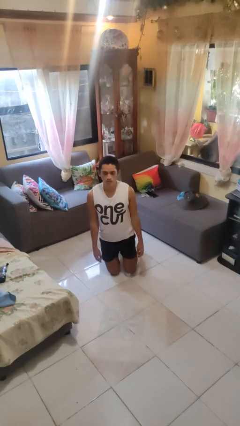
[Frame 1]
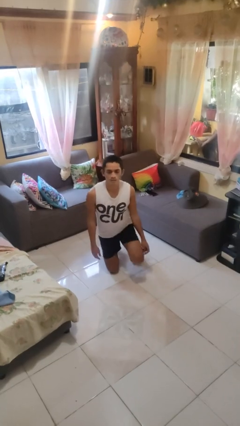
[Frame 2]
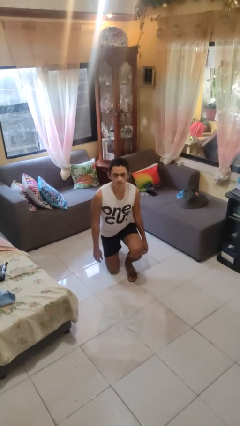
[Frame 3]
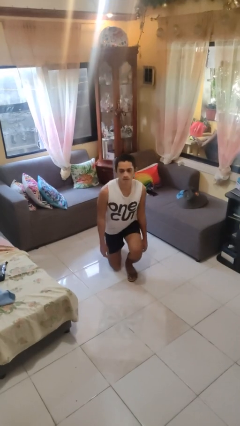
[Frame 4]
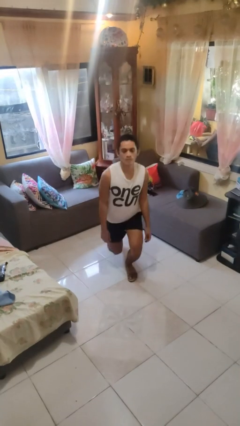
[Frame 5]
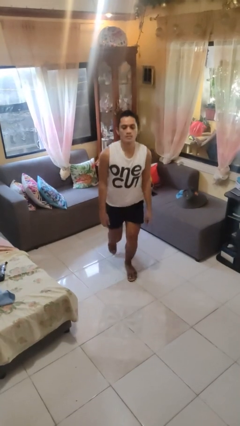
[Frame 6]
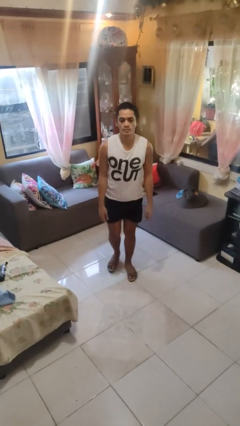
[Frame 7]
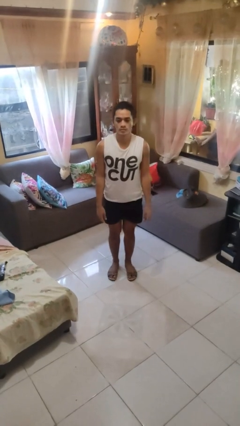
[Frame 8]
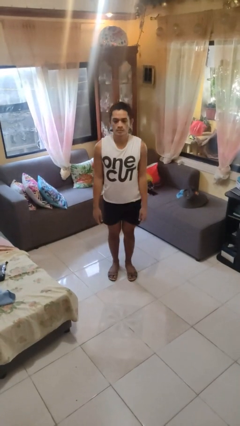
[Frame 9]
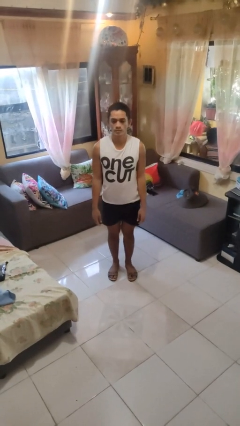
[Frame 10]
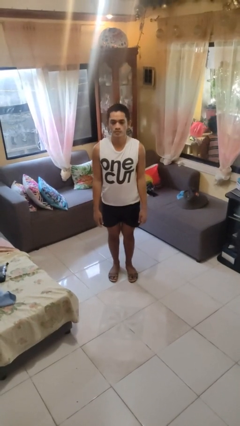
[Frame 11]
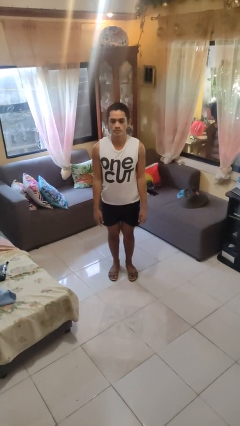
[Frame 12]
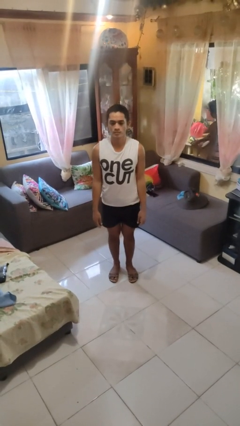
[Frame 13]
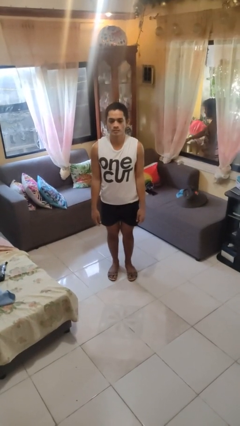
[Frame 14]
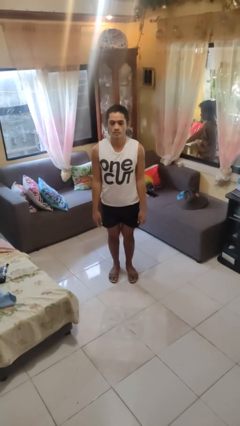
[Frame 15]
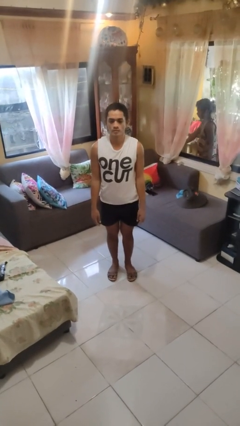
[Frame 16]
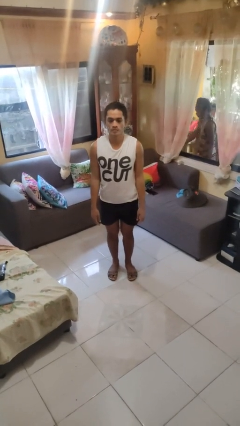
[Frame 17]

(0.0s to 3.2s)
person stands up from floor

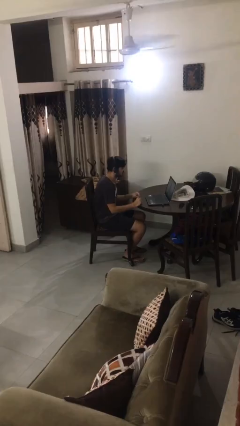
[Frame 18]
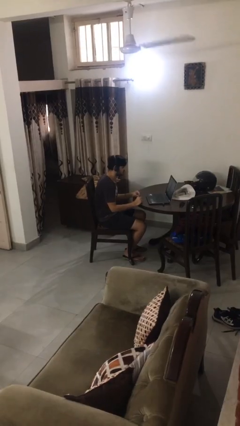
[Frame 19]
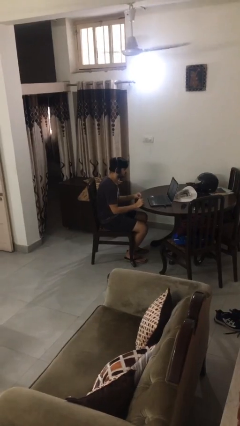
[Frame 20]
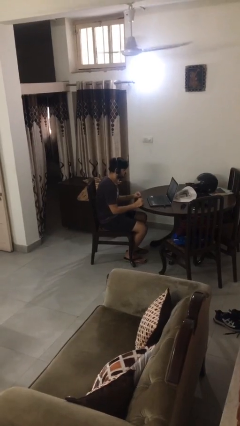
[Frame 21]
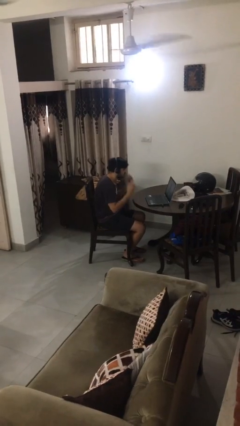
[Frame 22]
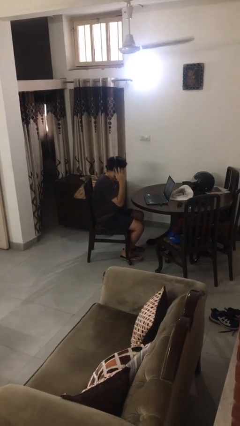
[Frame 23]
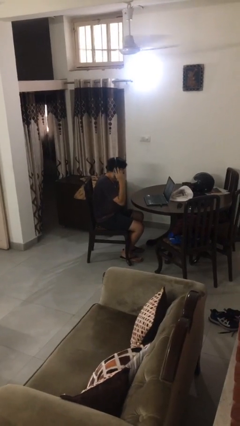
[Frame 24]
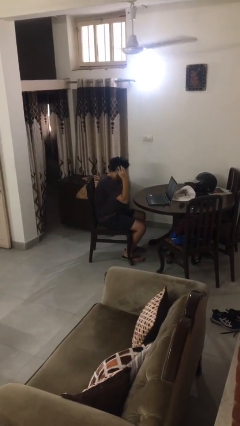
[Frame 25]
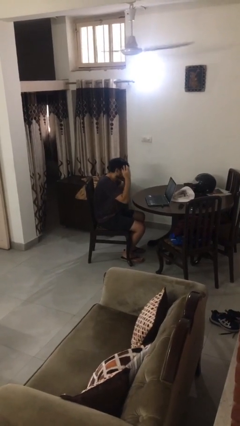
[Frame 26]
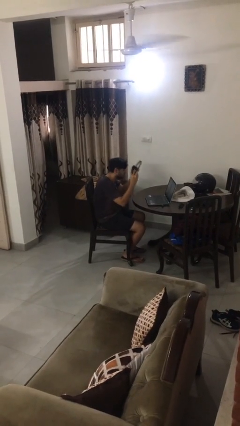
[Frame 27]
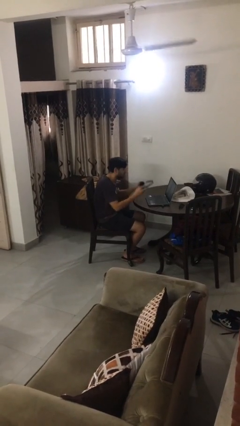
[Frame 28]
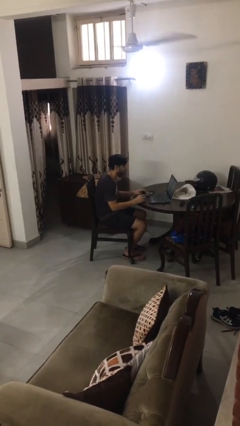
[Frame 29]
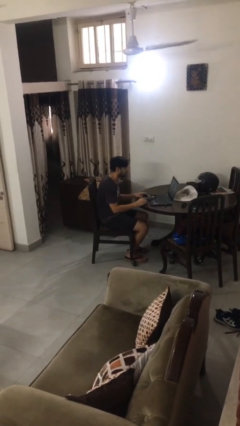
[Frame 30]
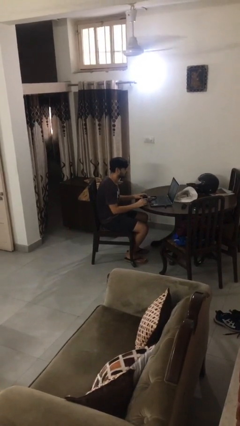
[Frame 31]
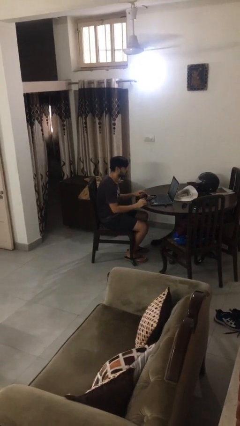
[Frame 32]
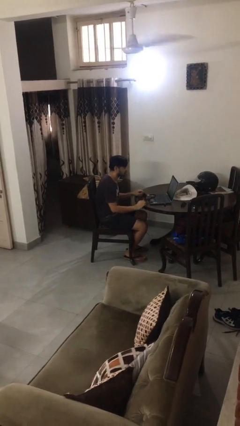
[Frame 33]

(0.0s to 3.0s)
person takes off headphones

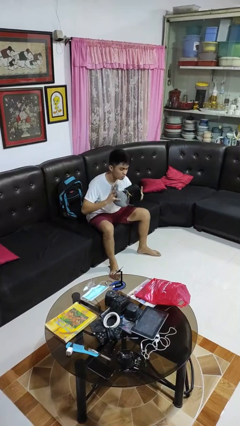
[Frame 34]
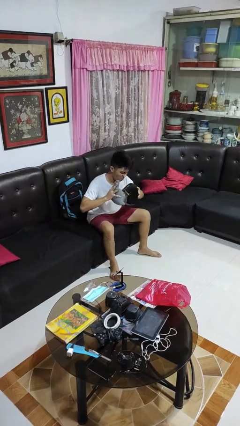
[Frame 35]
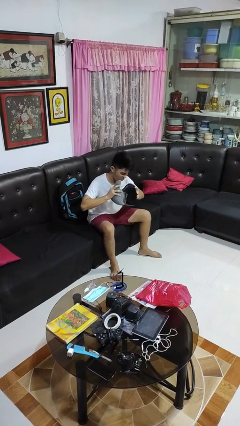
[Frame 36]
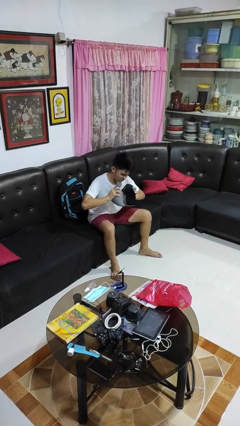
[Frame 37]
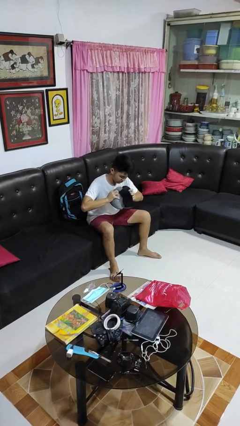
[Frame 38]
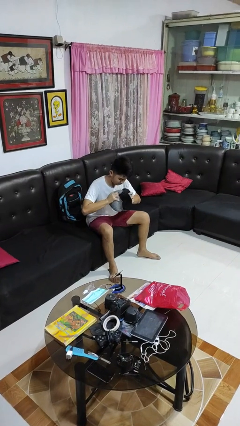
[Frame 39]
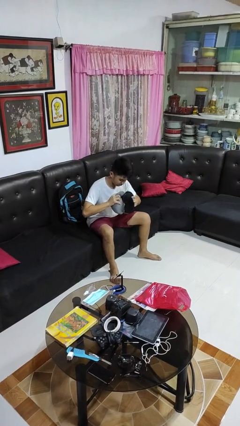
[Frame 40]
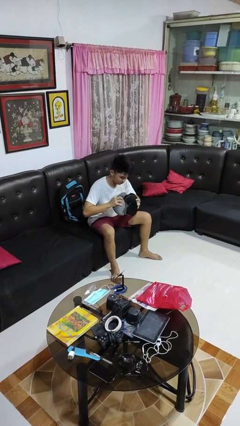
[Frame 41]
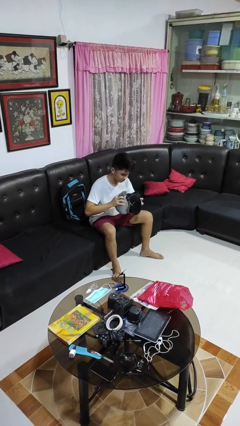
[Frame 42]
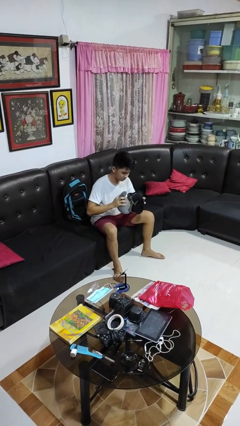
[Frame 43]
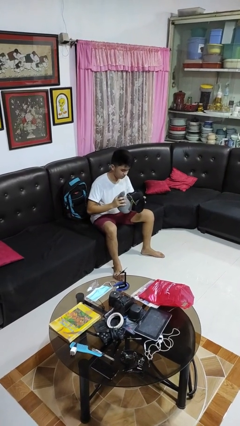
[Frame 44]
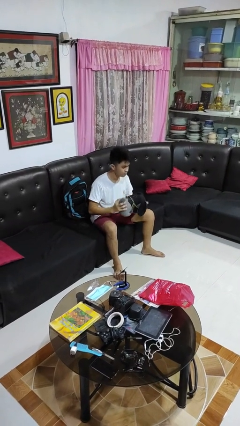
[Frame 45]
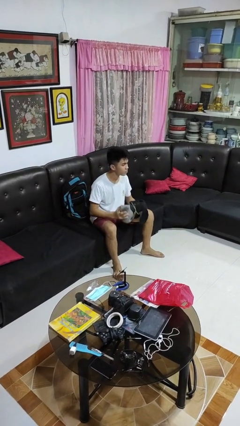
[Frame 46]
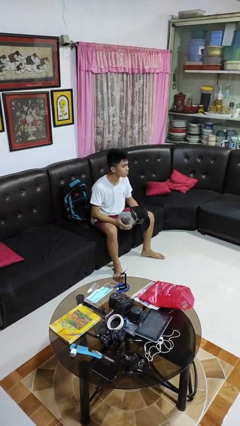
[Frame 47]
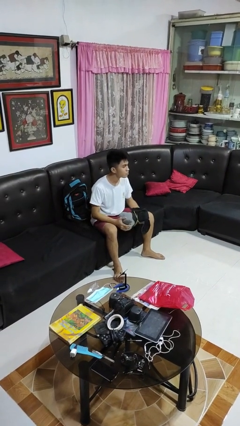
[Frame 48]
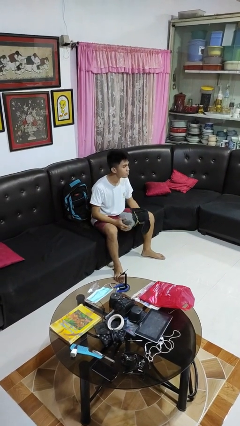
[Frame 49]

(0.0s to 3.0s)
person squeezes object

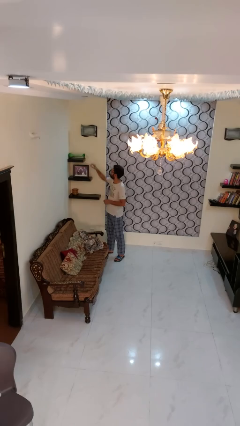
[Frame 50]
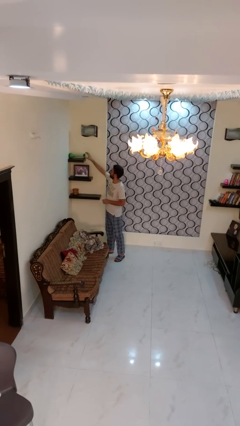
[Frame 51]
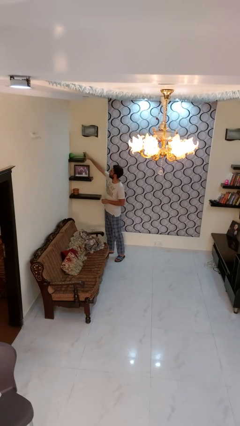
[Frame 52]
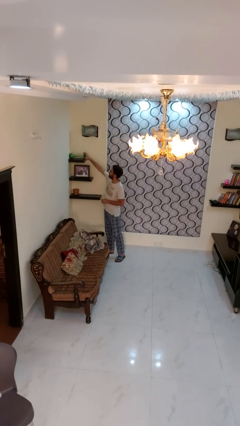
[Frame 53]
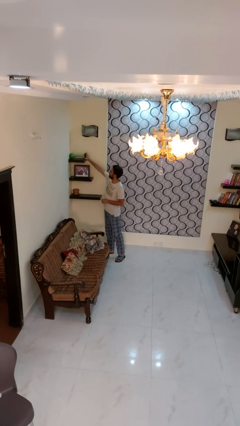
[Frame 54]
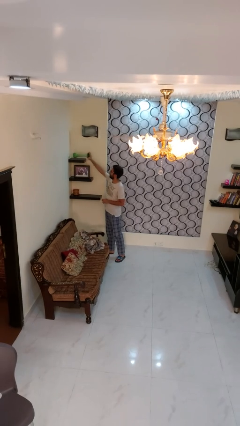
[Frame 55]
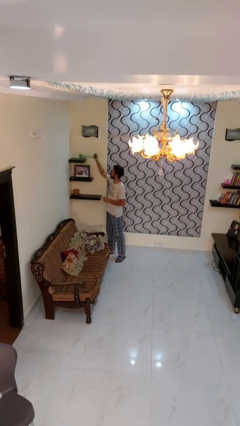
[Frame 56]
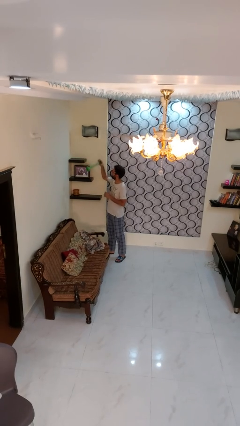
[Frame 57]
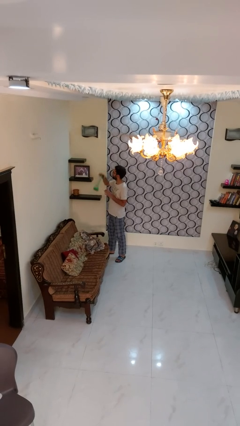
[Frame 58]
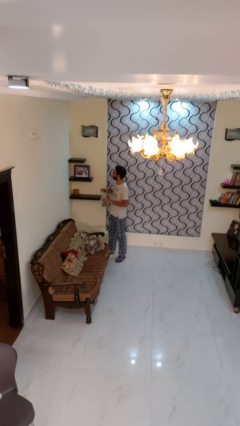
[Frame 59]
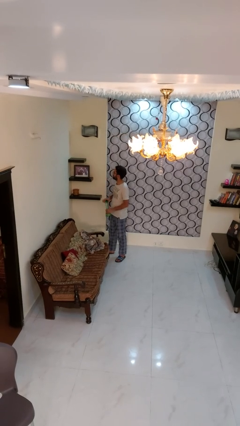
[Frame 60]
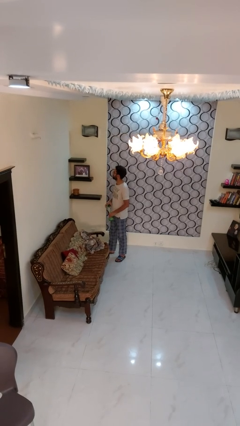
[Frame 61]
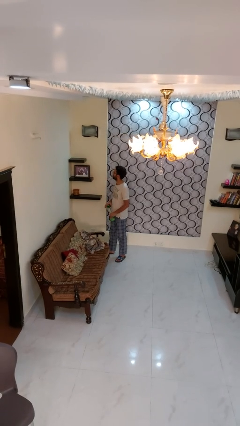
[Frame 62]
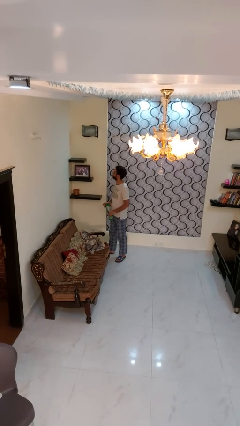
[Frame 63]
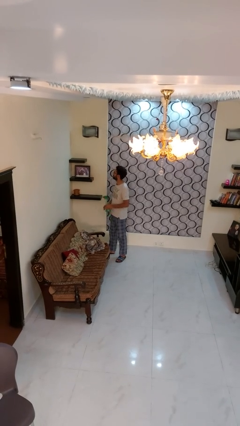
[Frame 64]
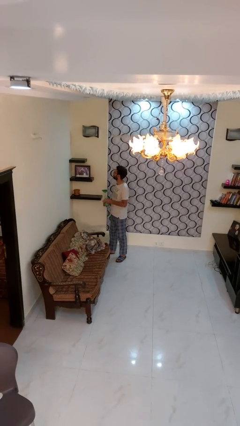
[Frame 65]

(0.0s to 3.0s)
person picks up object from shelf

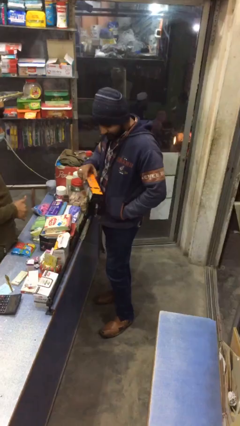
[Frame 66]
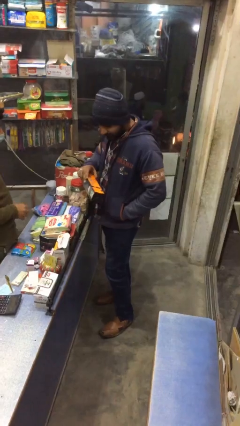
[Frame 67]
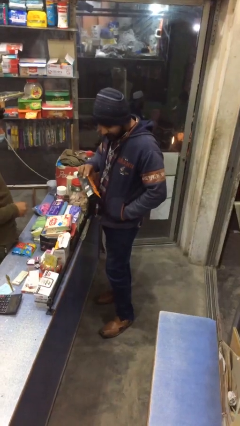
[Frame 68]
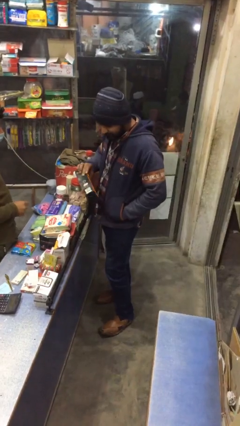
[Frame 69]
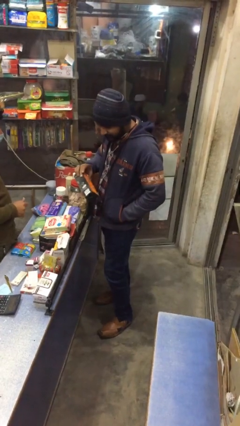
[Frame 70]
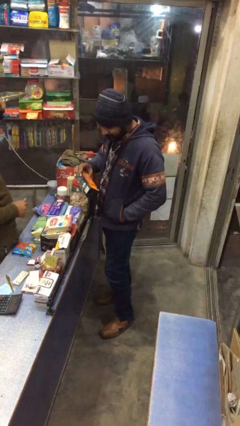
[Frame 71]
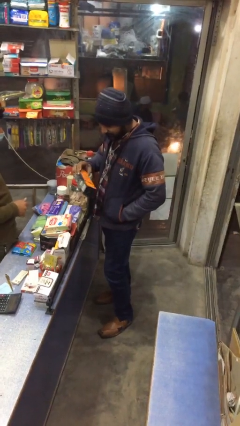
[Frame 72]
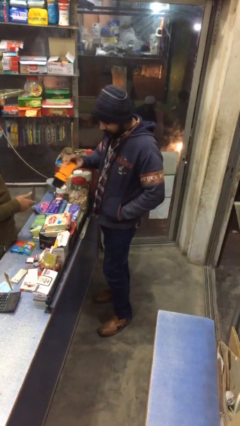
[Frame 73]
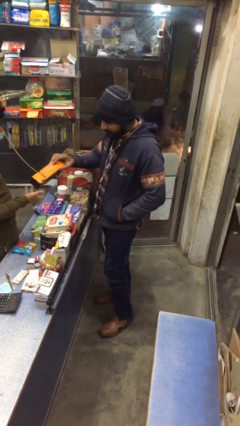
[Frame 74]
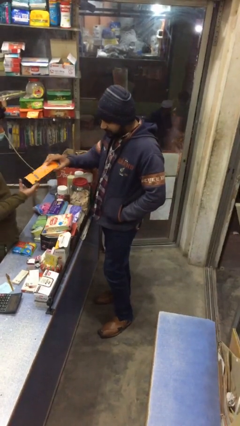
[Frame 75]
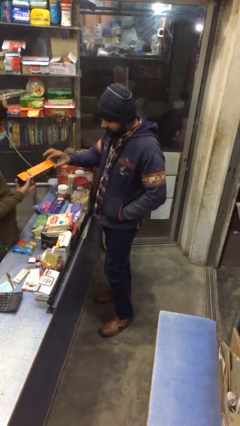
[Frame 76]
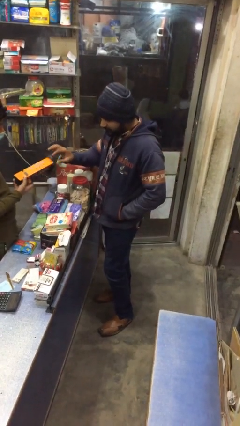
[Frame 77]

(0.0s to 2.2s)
person transfers object to person

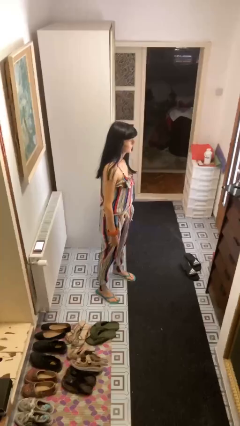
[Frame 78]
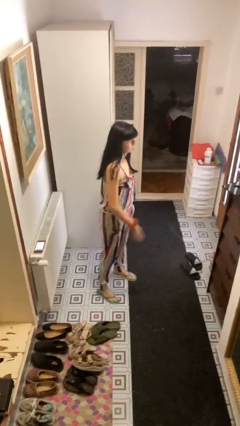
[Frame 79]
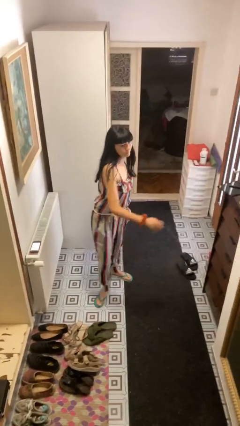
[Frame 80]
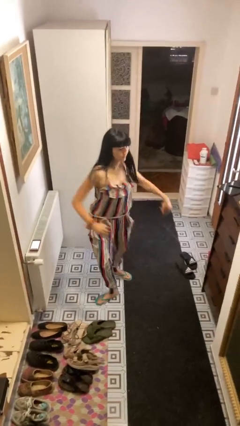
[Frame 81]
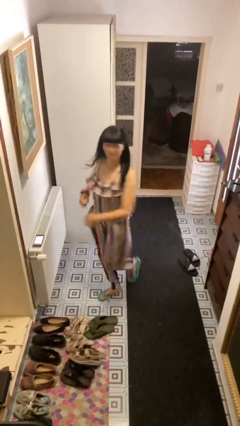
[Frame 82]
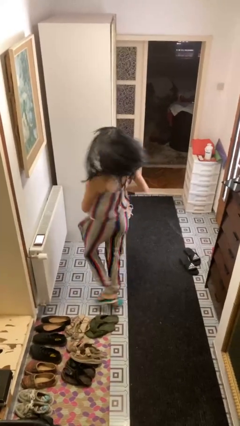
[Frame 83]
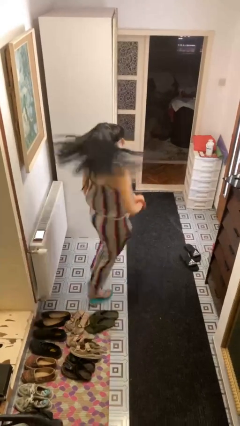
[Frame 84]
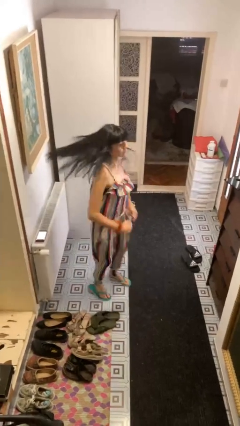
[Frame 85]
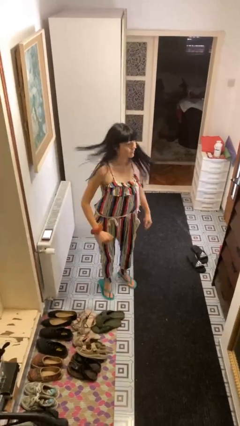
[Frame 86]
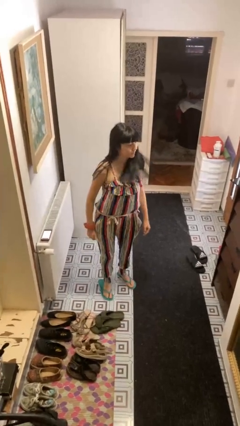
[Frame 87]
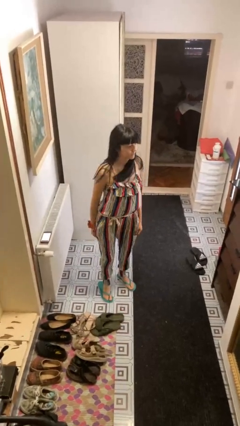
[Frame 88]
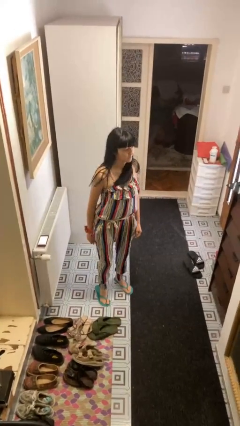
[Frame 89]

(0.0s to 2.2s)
person twirls

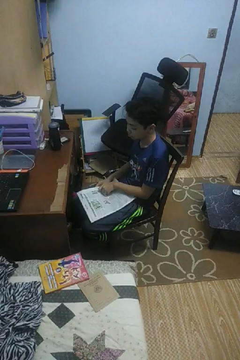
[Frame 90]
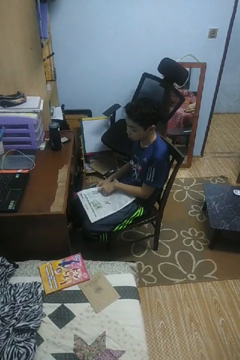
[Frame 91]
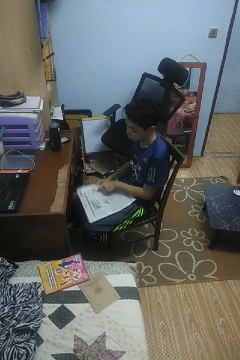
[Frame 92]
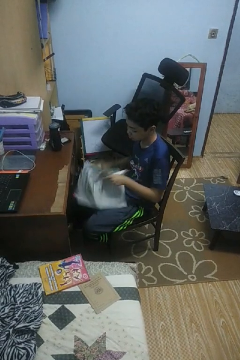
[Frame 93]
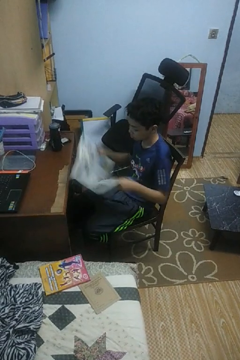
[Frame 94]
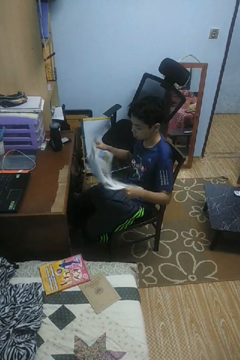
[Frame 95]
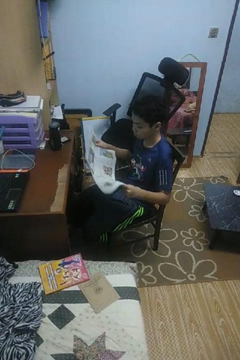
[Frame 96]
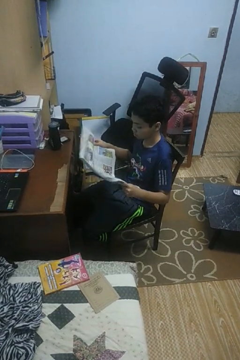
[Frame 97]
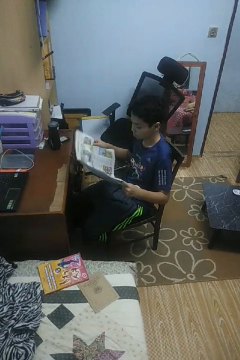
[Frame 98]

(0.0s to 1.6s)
person reads newspaper
